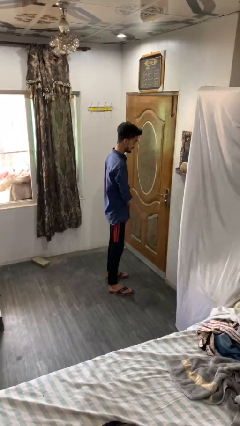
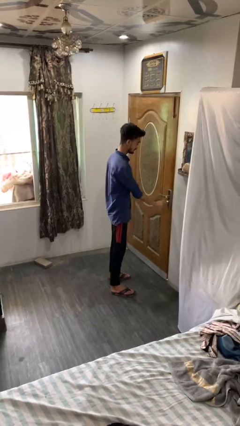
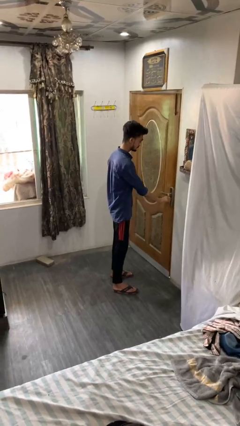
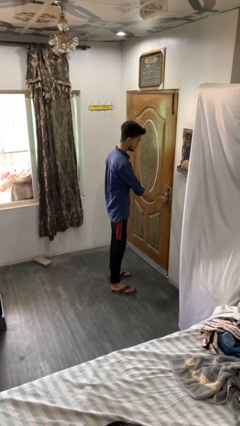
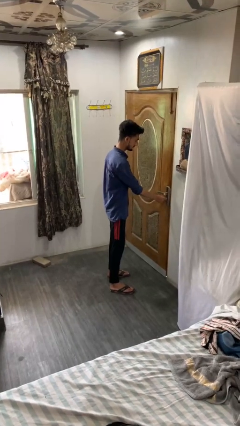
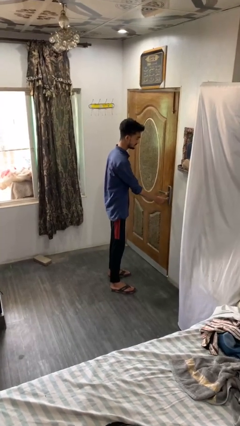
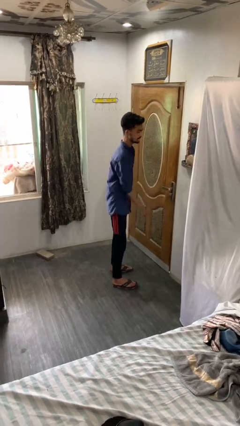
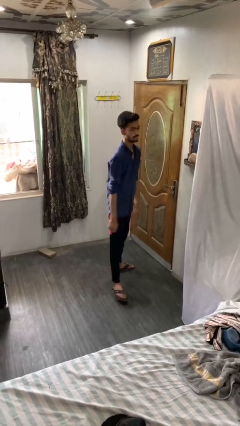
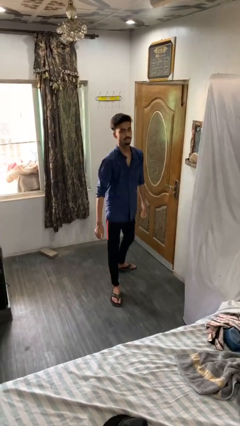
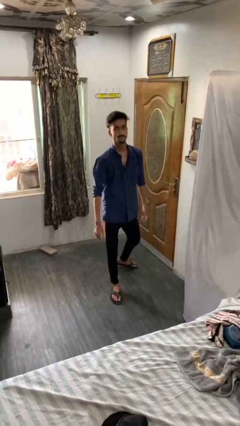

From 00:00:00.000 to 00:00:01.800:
person locks door with keys

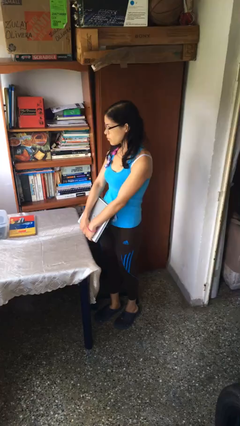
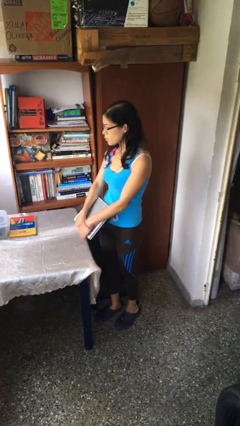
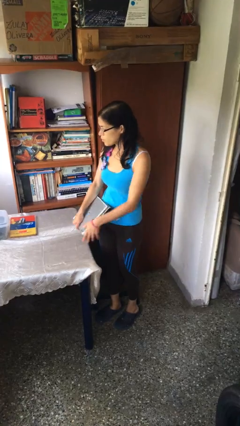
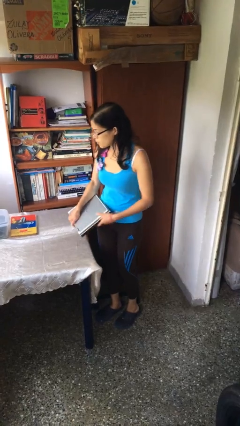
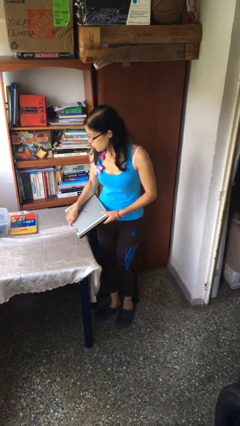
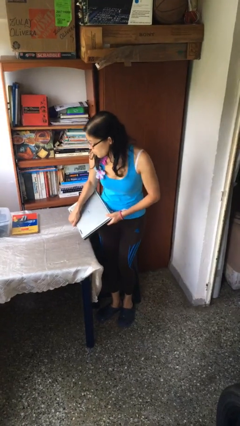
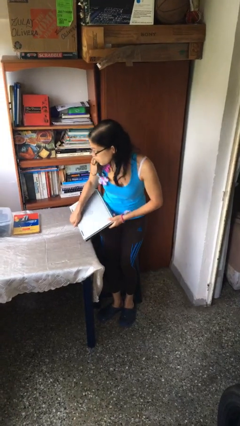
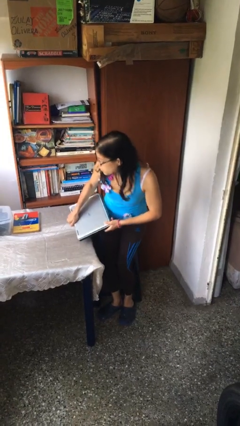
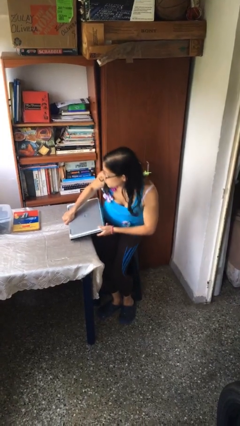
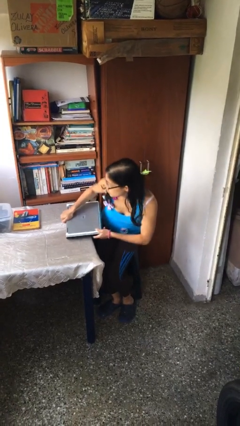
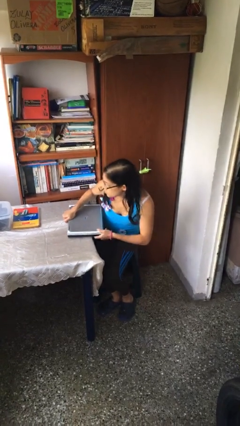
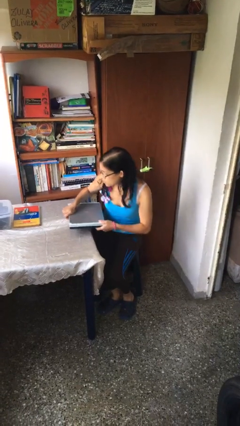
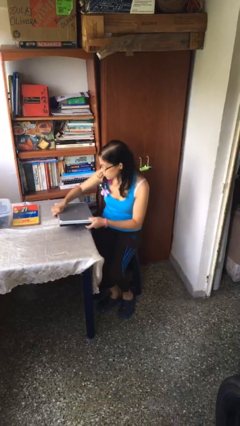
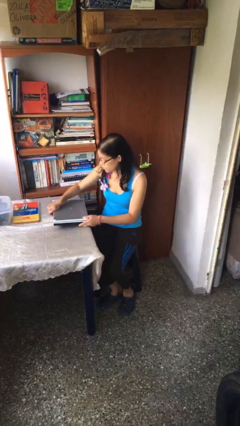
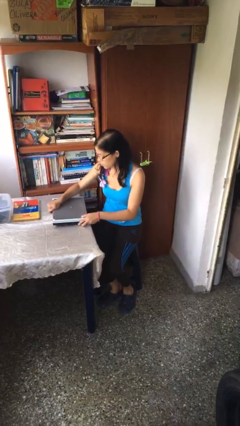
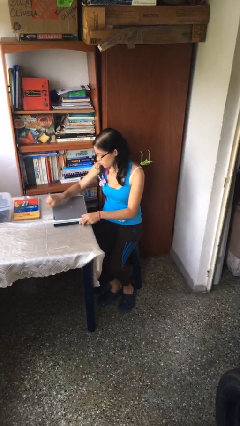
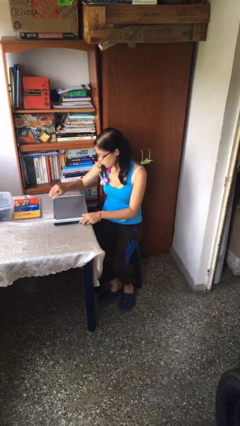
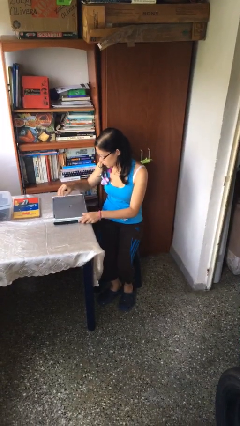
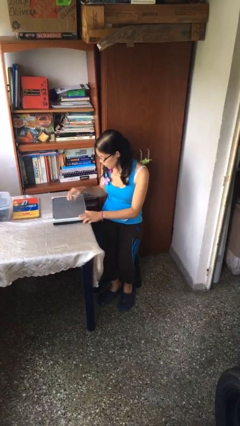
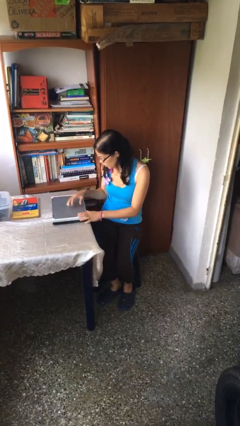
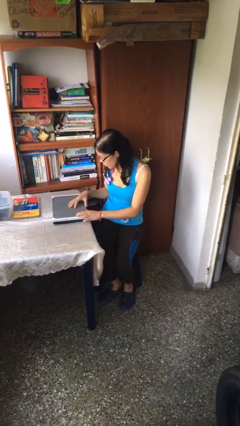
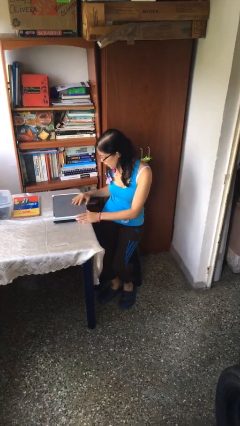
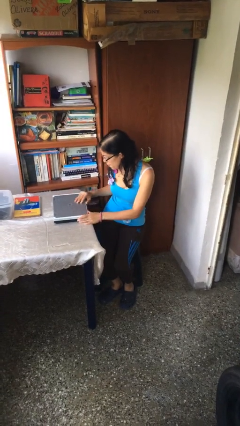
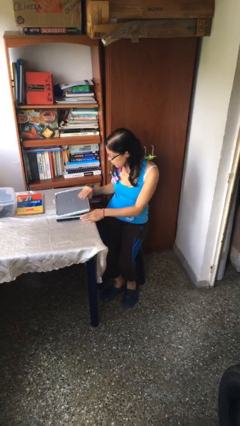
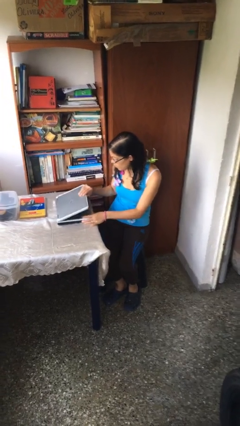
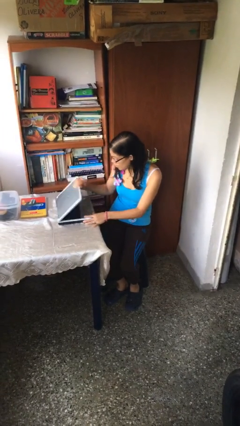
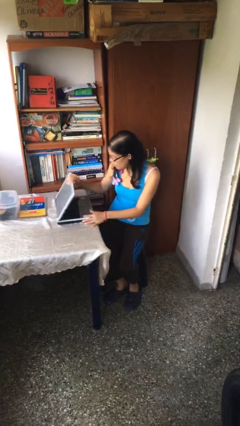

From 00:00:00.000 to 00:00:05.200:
person sits down

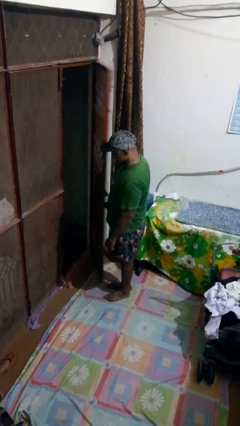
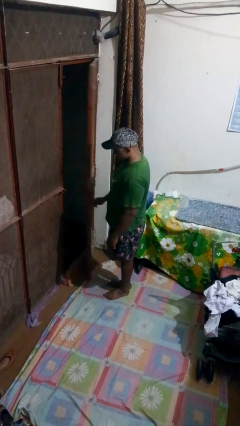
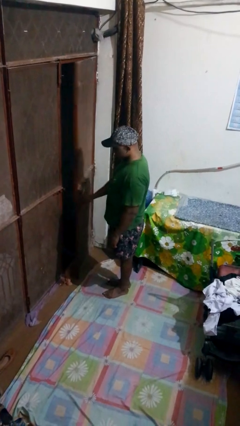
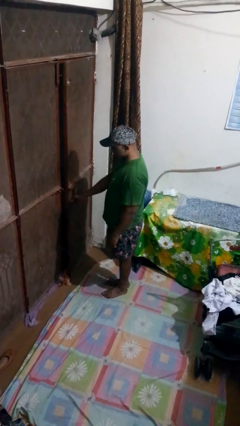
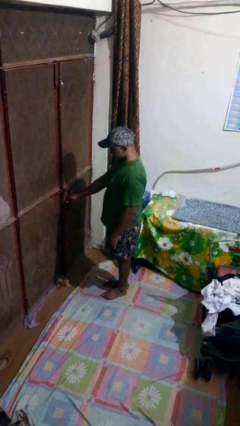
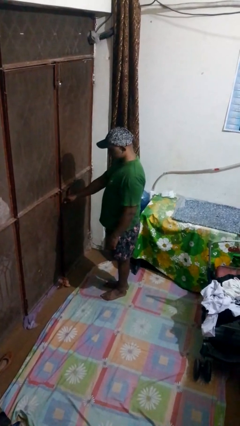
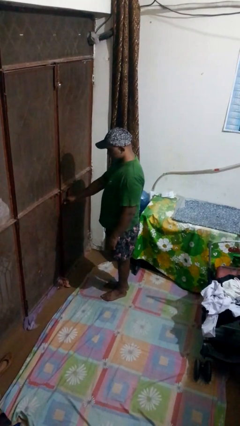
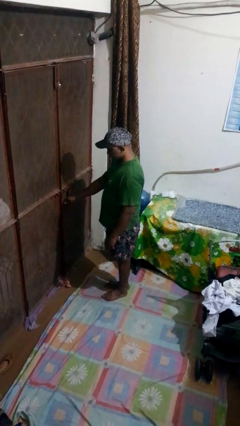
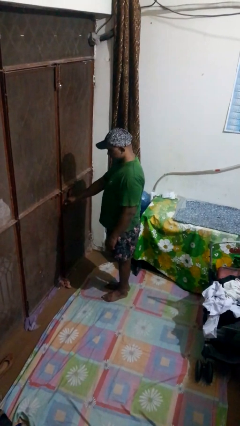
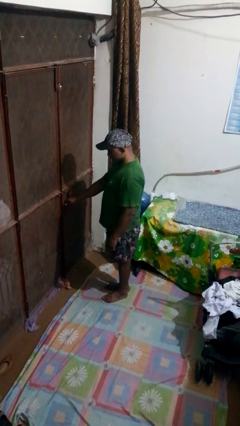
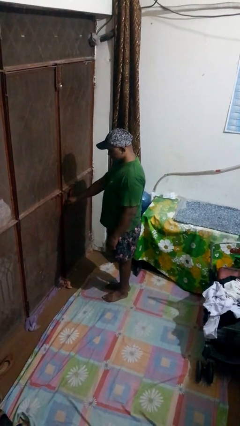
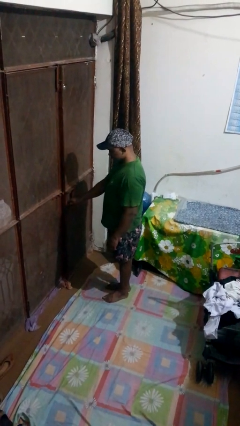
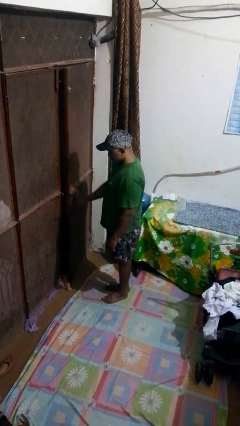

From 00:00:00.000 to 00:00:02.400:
person closes gate

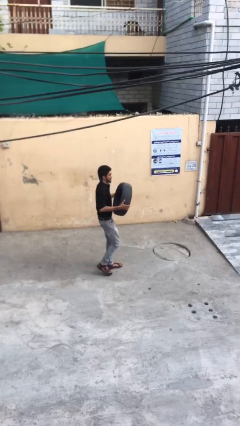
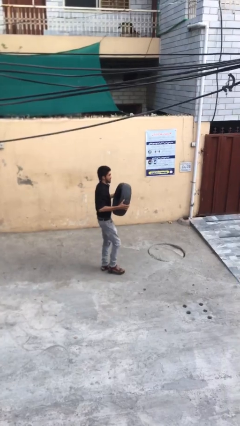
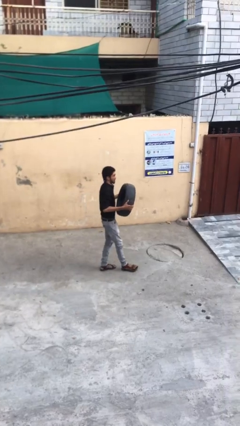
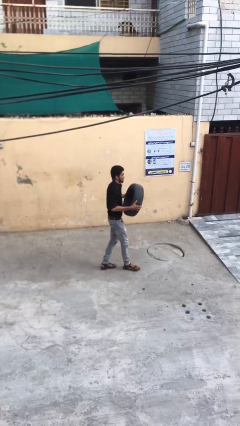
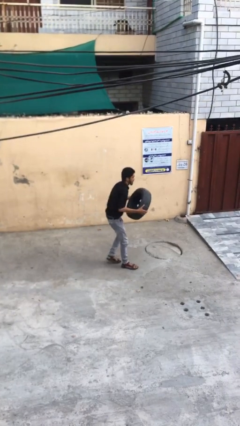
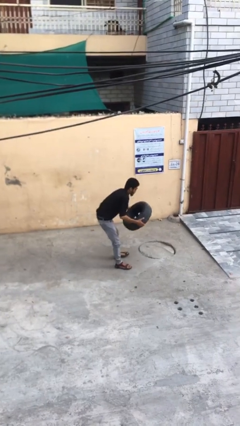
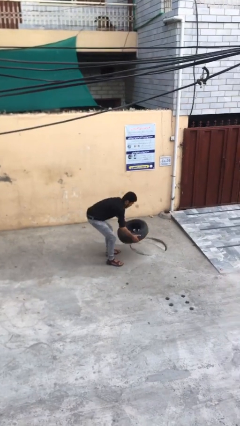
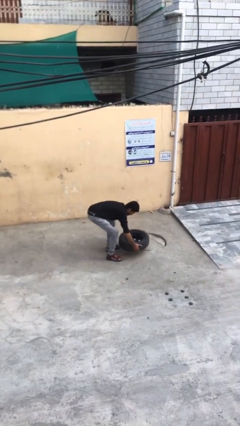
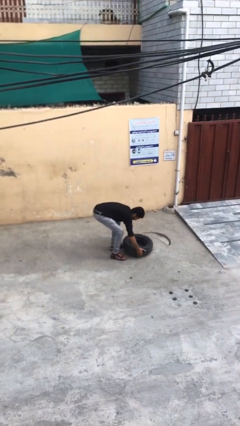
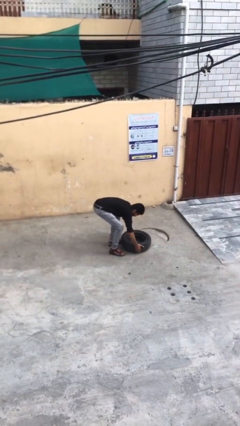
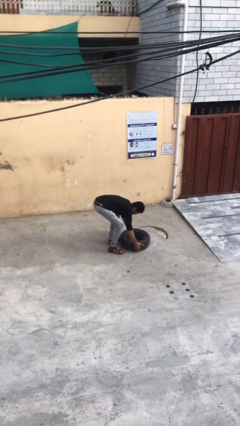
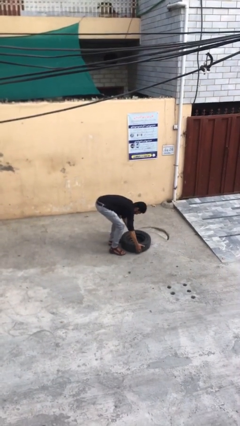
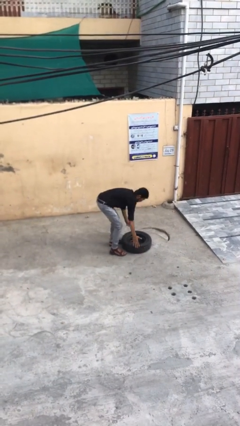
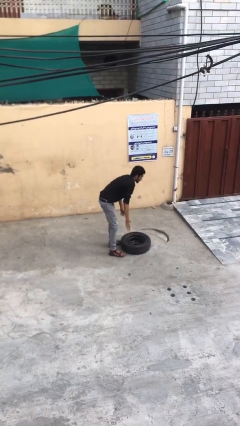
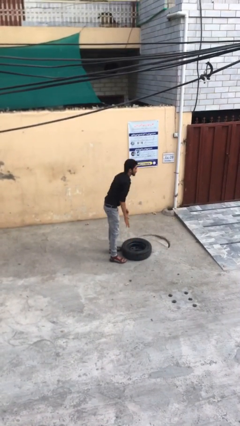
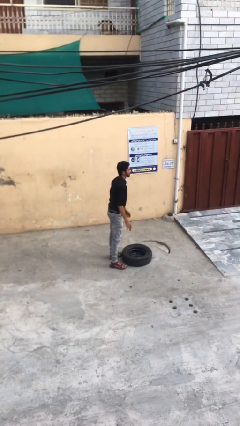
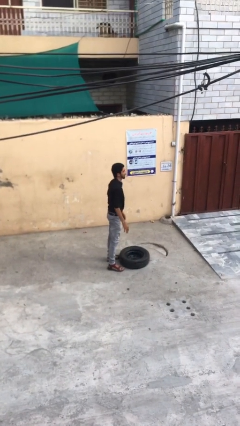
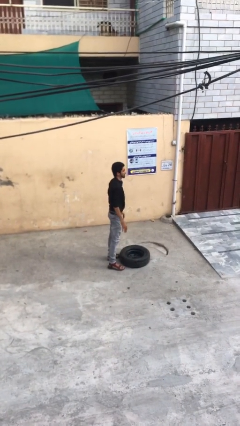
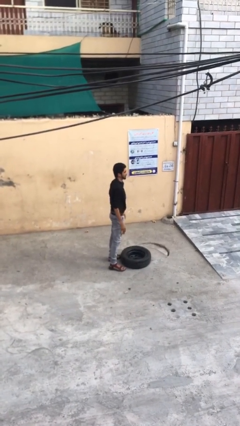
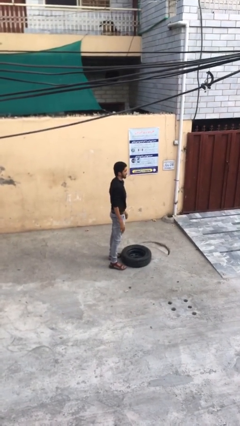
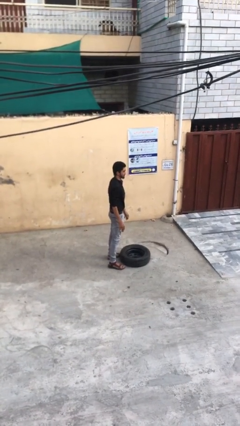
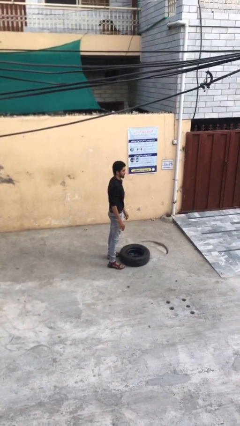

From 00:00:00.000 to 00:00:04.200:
person puts down object on floor

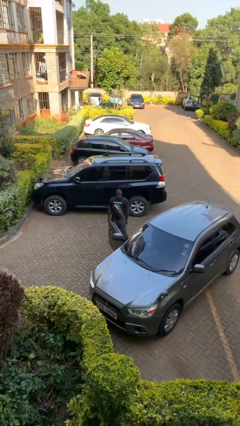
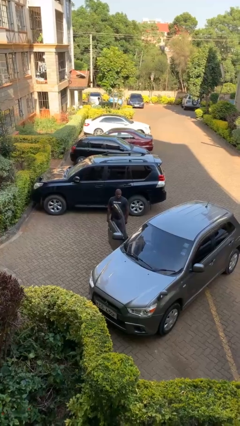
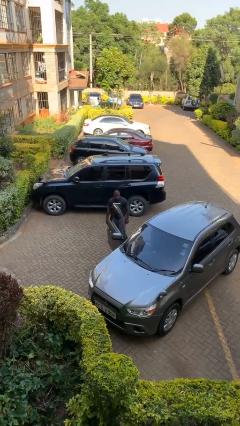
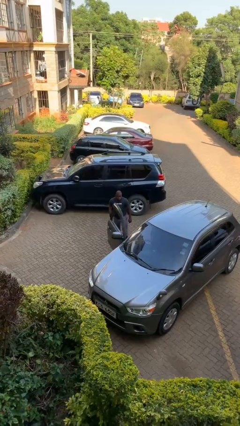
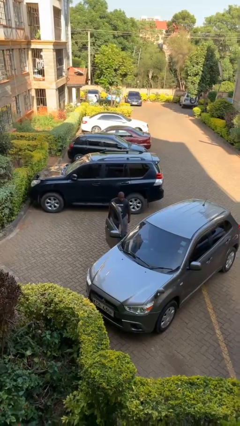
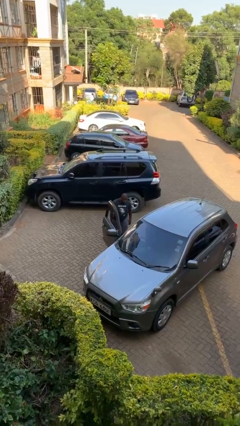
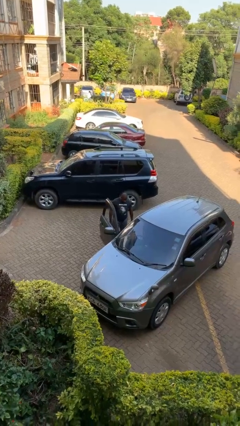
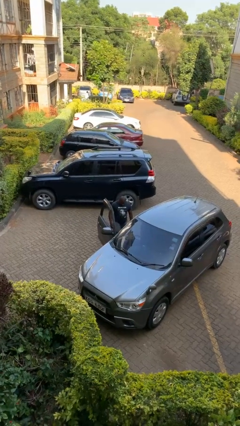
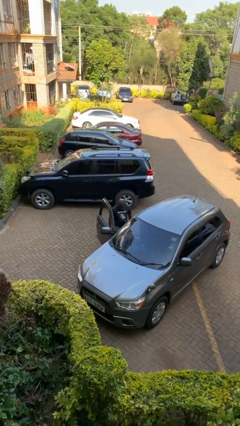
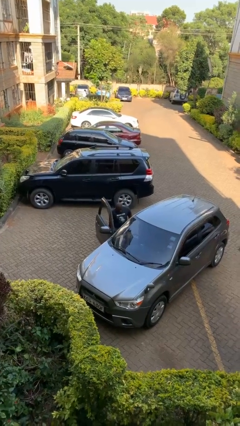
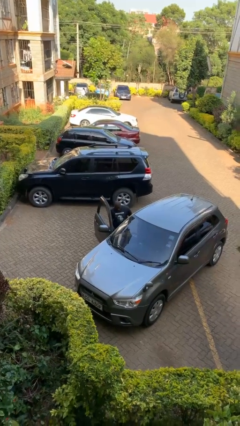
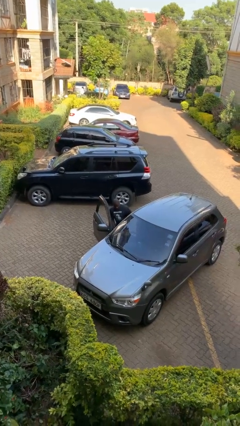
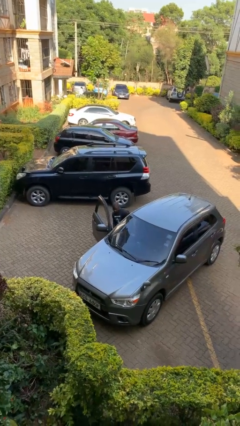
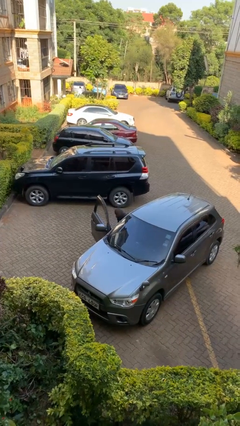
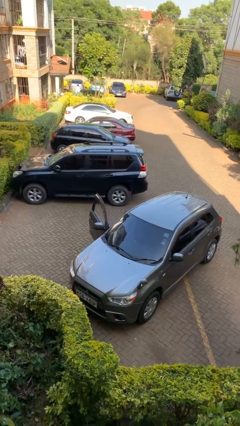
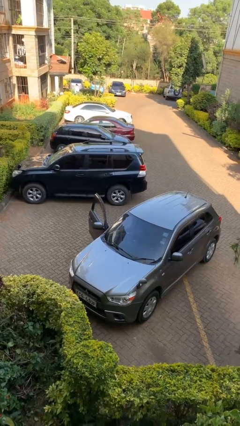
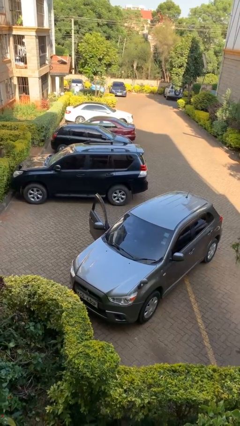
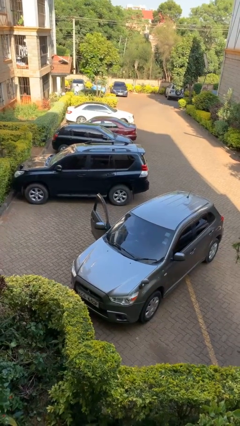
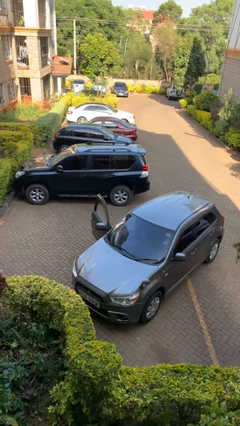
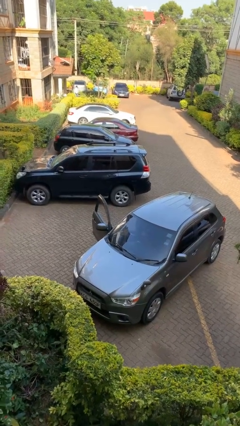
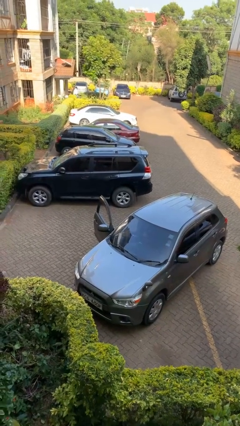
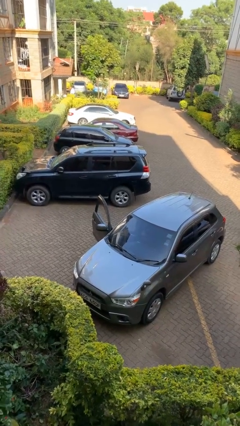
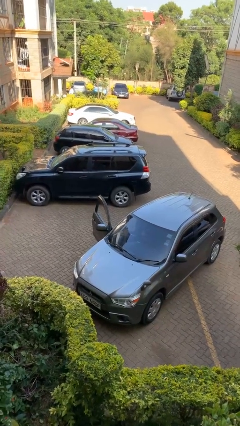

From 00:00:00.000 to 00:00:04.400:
person enters car
